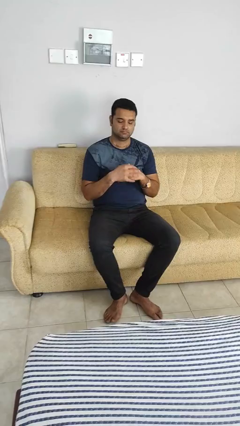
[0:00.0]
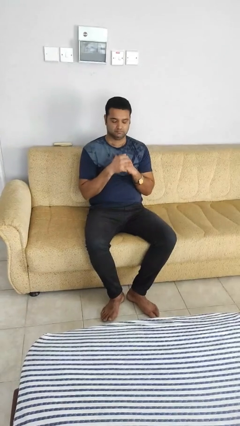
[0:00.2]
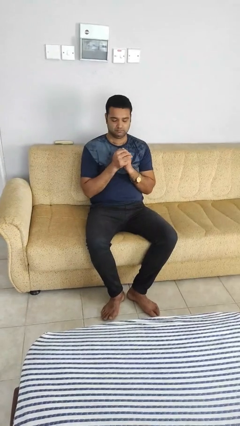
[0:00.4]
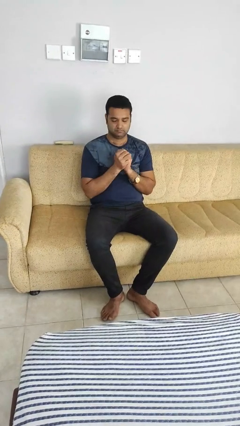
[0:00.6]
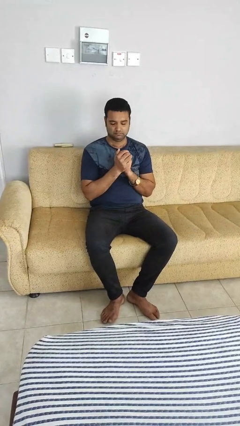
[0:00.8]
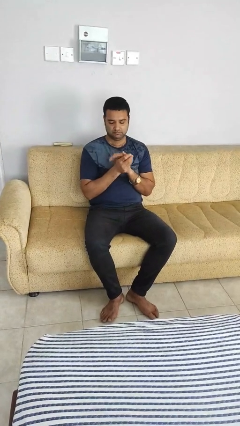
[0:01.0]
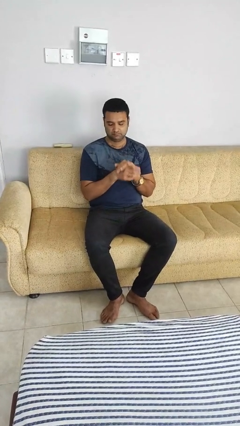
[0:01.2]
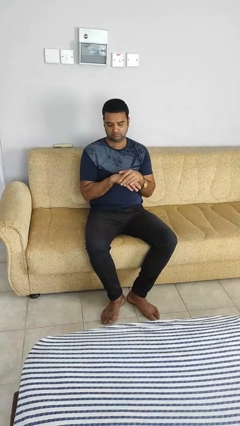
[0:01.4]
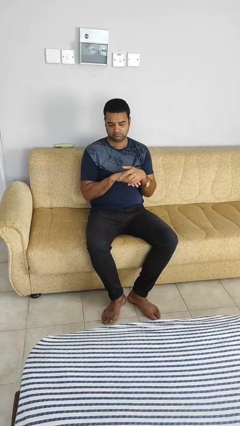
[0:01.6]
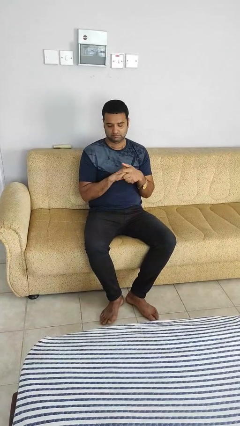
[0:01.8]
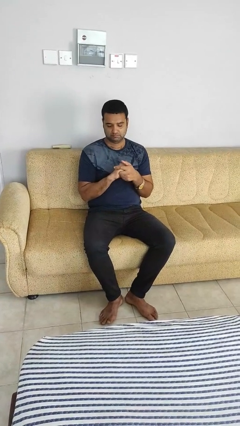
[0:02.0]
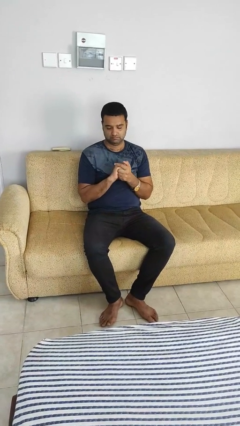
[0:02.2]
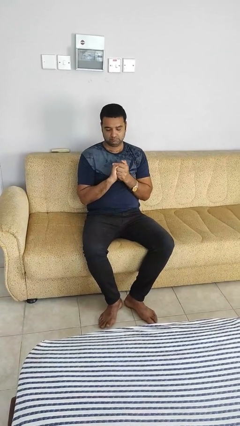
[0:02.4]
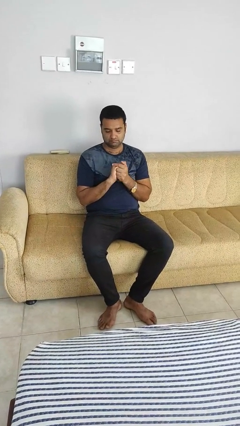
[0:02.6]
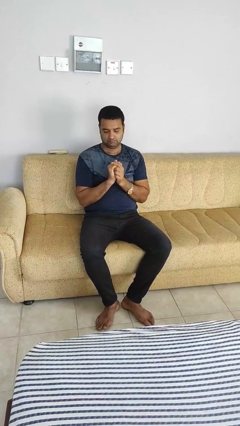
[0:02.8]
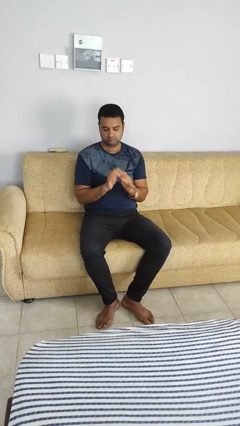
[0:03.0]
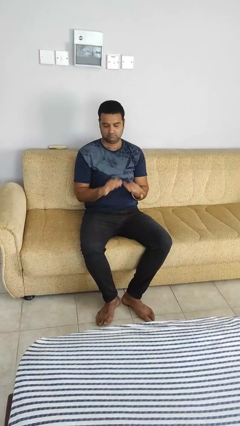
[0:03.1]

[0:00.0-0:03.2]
person looks at hands in lap

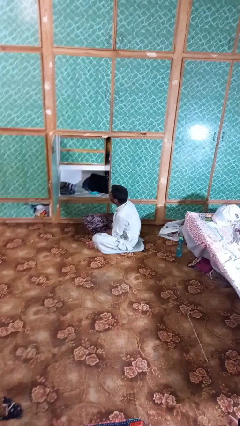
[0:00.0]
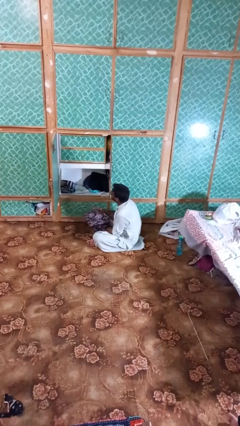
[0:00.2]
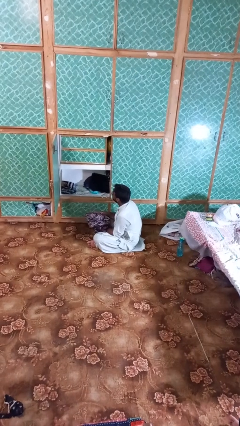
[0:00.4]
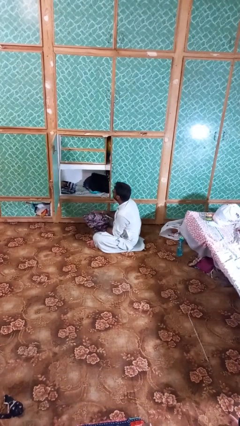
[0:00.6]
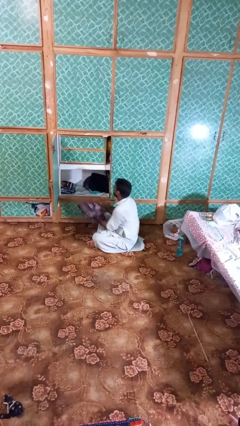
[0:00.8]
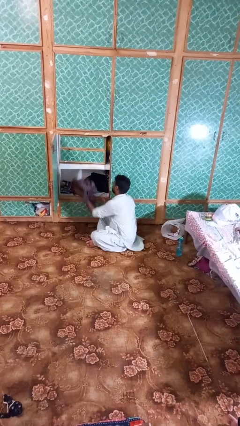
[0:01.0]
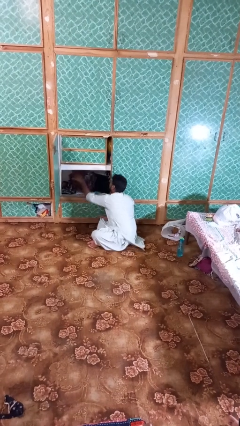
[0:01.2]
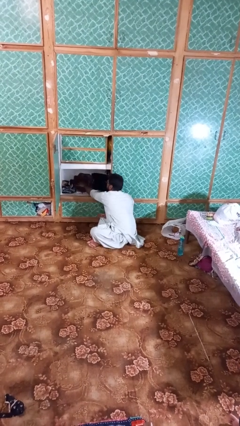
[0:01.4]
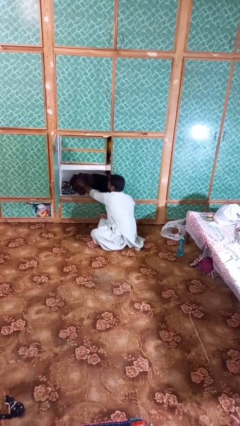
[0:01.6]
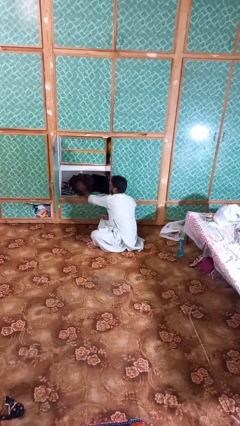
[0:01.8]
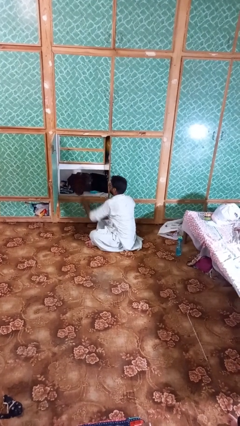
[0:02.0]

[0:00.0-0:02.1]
person puts clothes into dresser

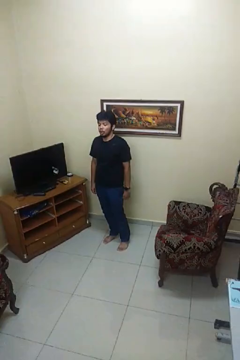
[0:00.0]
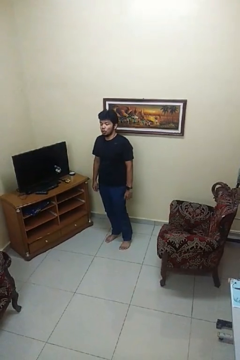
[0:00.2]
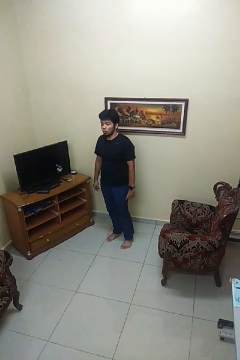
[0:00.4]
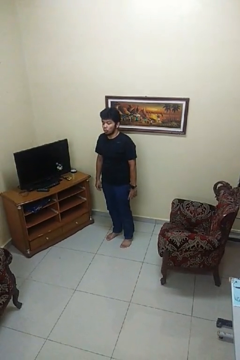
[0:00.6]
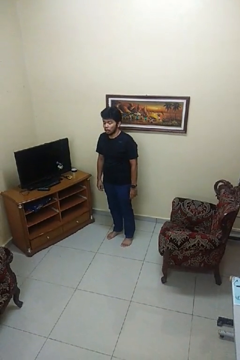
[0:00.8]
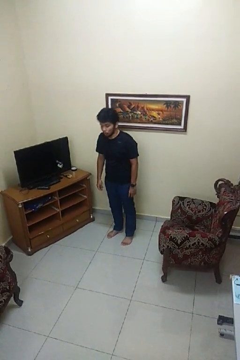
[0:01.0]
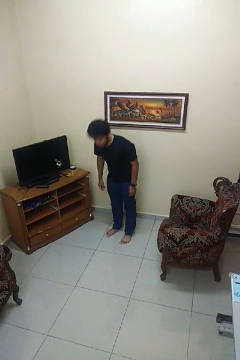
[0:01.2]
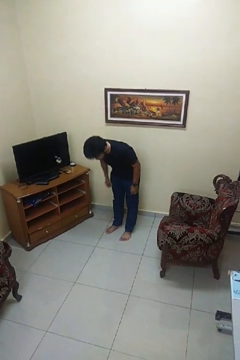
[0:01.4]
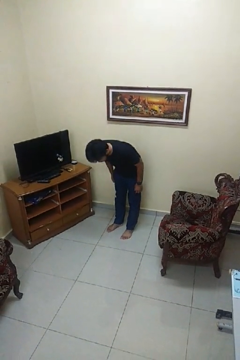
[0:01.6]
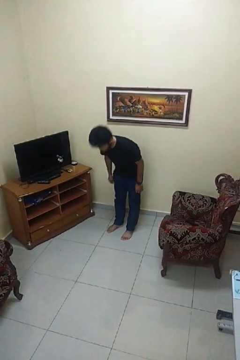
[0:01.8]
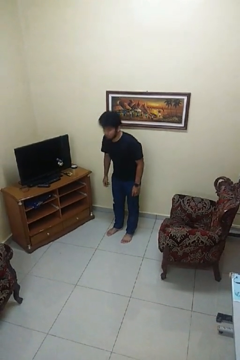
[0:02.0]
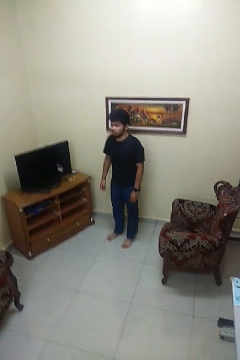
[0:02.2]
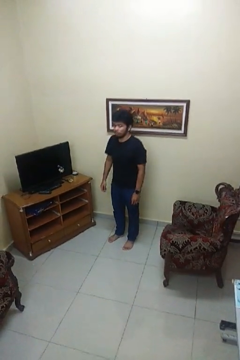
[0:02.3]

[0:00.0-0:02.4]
person bows

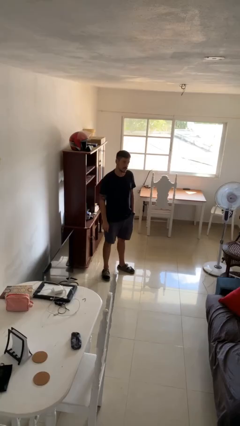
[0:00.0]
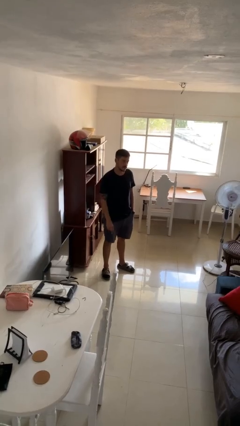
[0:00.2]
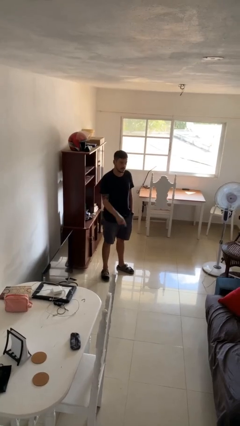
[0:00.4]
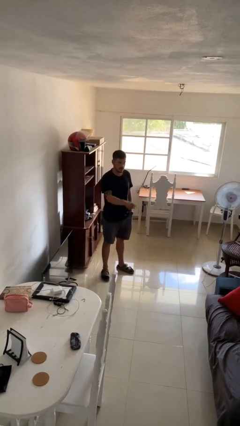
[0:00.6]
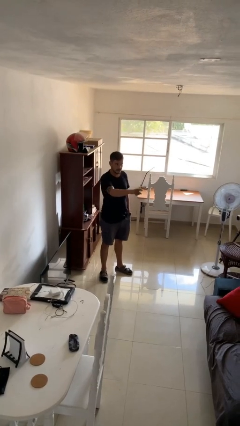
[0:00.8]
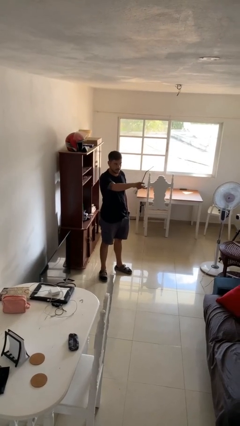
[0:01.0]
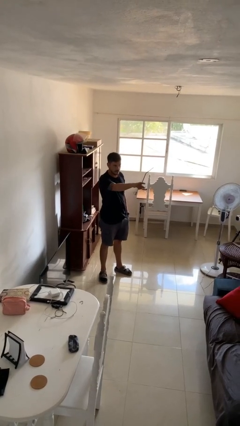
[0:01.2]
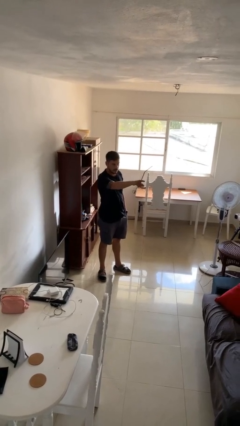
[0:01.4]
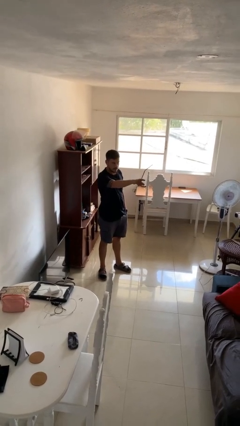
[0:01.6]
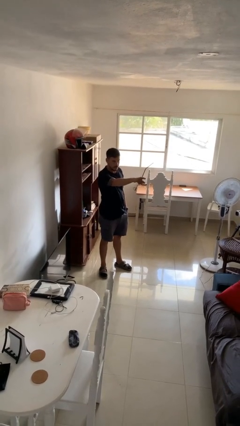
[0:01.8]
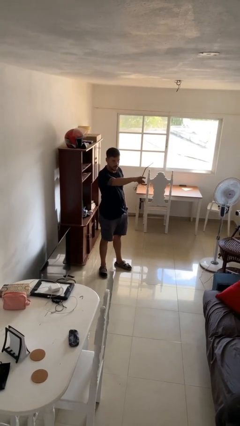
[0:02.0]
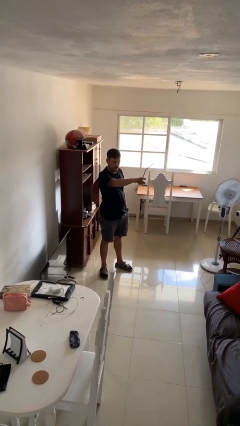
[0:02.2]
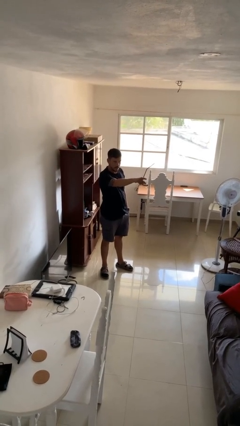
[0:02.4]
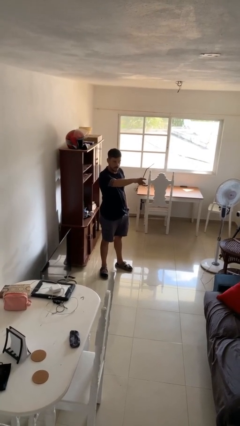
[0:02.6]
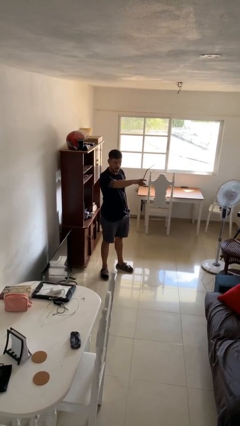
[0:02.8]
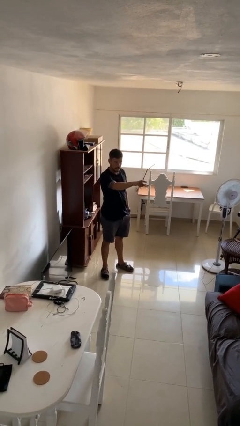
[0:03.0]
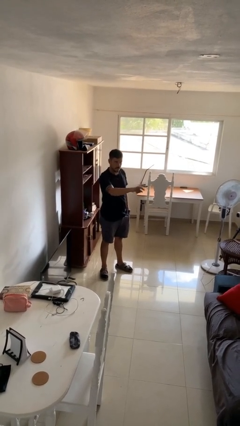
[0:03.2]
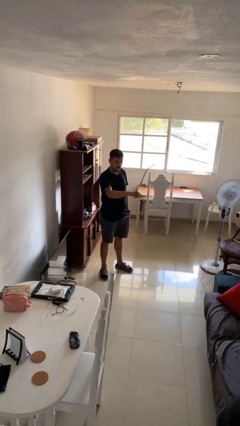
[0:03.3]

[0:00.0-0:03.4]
person points at person

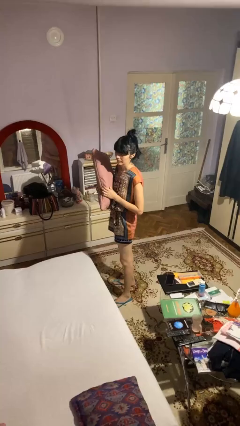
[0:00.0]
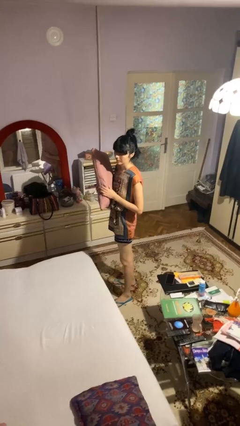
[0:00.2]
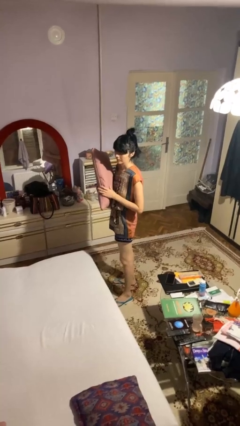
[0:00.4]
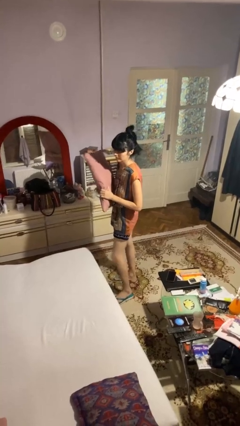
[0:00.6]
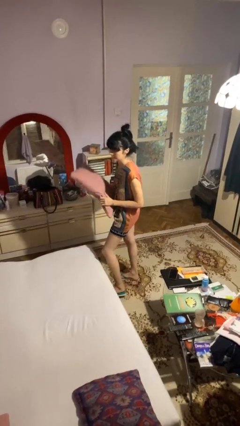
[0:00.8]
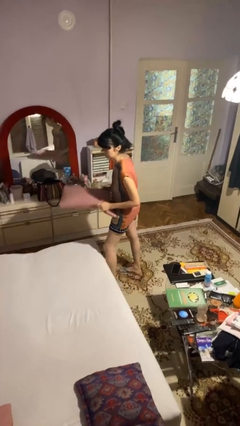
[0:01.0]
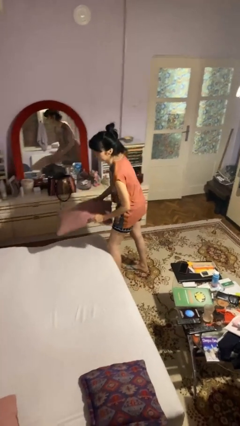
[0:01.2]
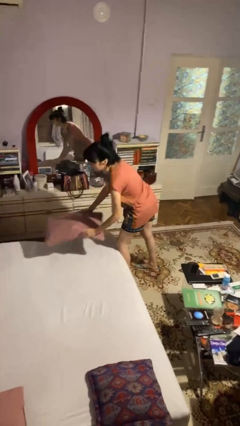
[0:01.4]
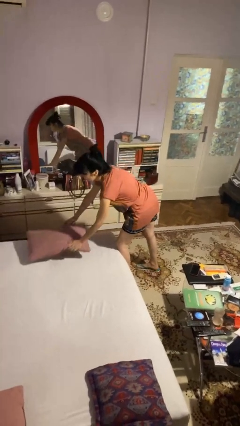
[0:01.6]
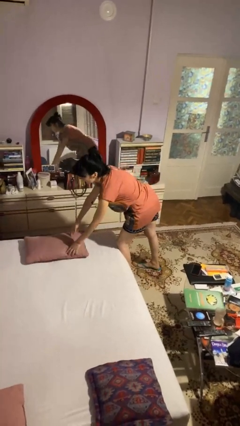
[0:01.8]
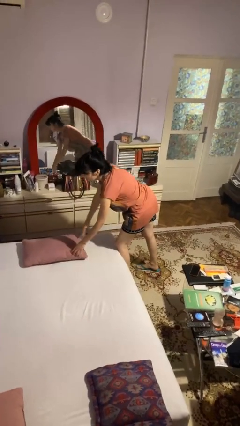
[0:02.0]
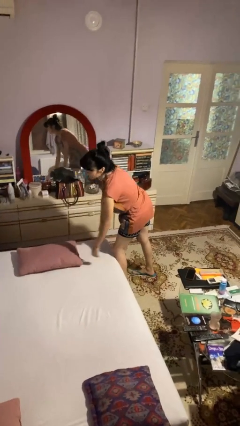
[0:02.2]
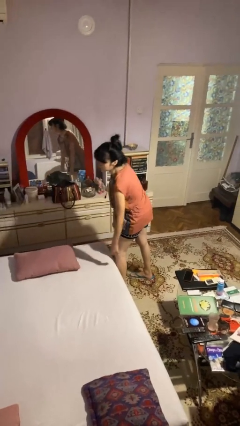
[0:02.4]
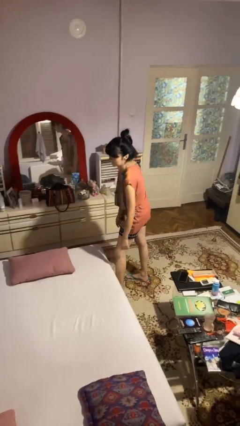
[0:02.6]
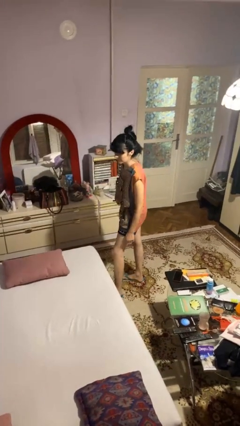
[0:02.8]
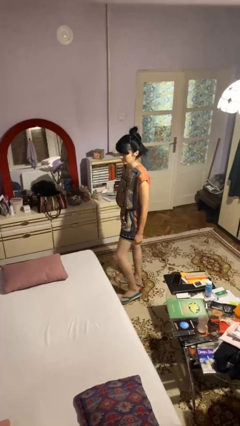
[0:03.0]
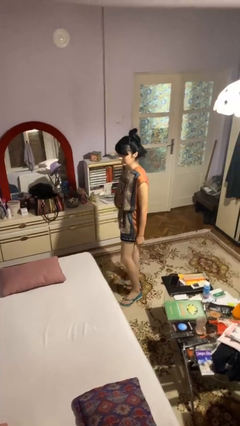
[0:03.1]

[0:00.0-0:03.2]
person puts down object on bed

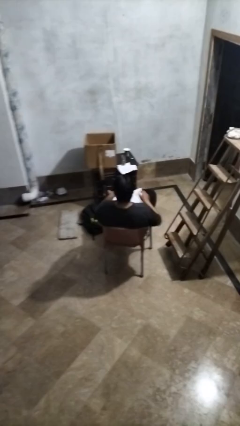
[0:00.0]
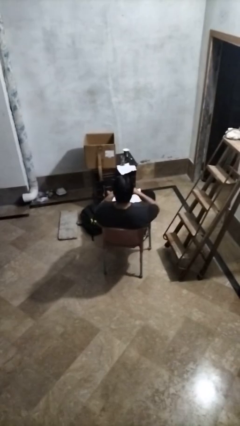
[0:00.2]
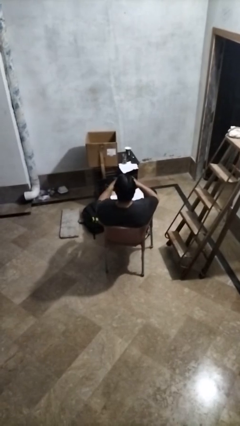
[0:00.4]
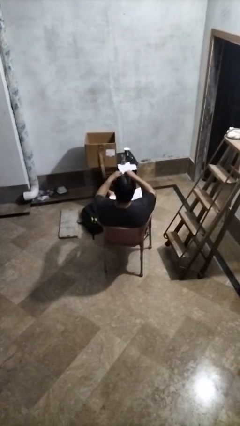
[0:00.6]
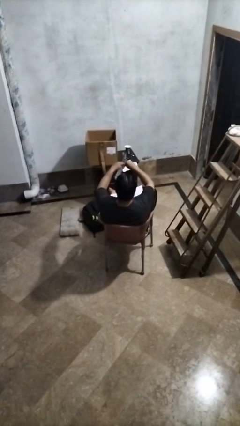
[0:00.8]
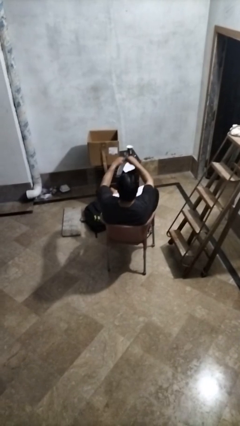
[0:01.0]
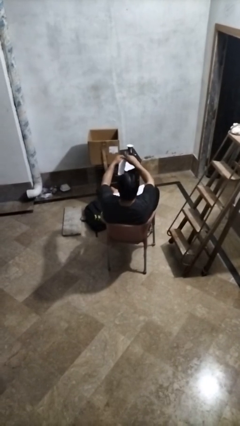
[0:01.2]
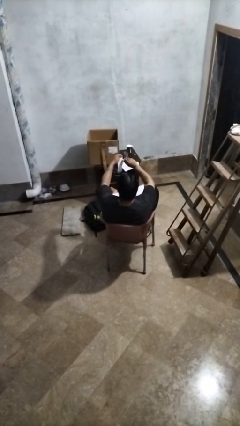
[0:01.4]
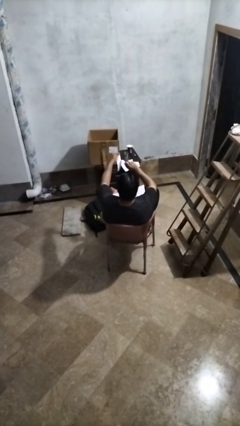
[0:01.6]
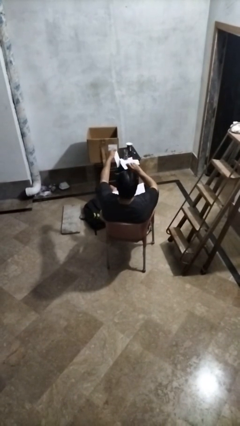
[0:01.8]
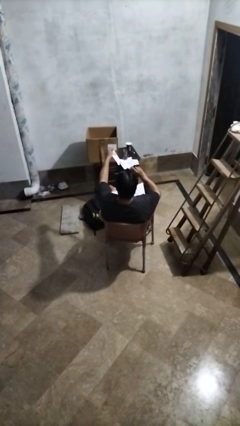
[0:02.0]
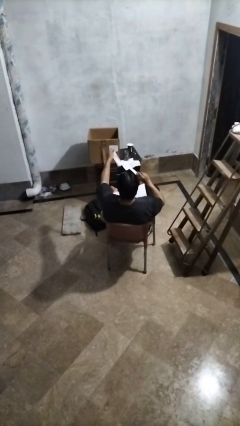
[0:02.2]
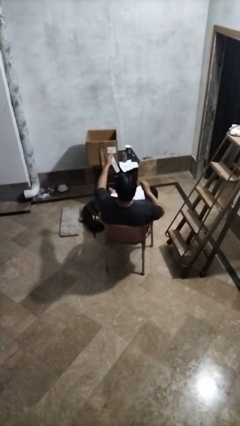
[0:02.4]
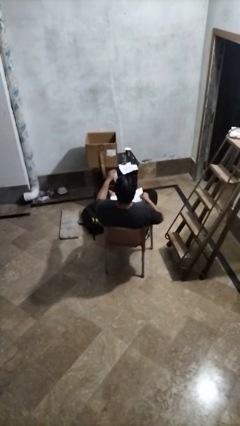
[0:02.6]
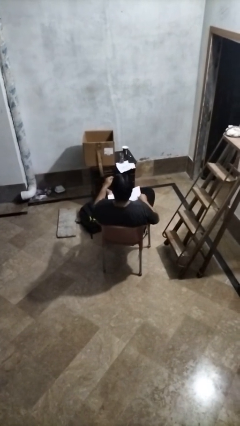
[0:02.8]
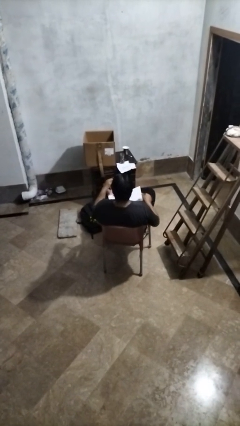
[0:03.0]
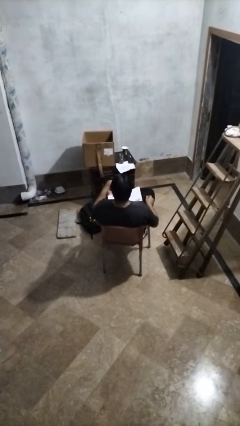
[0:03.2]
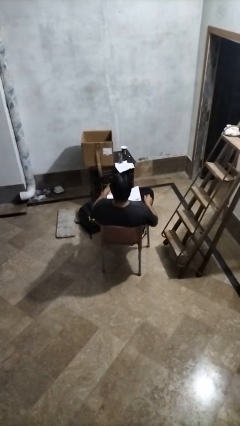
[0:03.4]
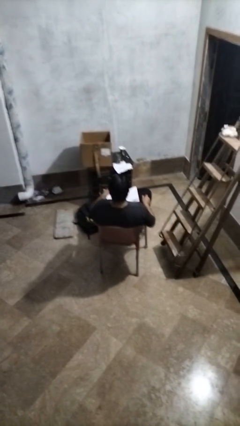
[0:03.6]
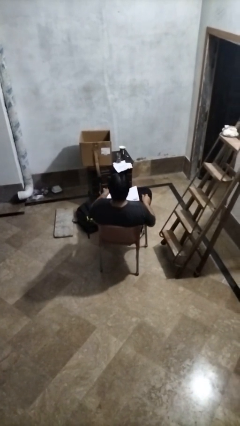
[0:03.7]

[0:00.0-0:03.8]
person tears paper

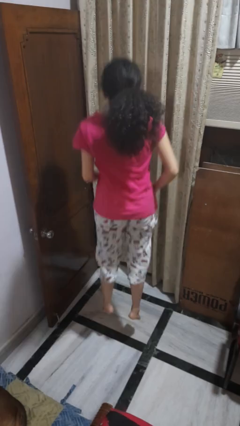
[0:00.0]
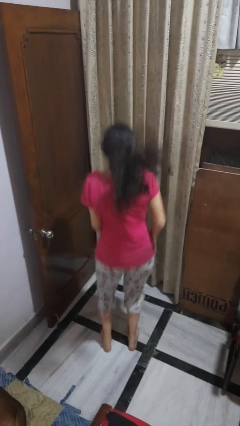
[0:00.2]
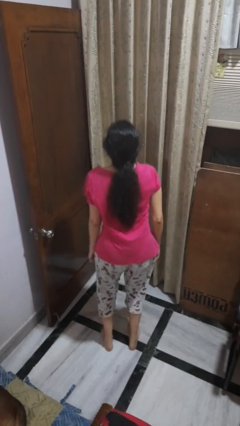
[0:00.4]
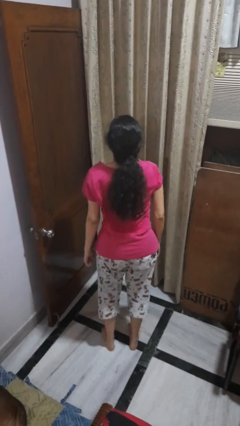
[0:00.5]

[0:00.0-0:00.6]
person jumps
